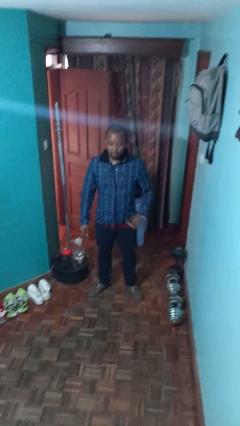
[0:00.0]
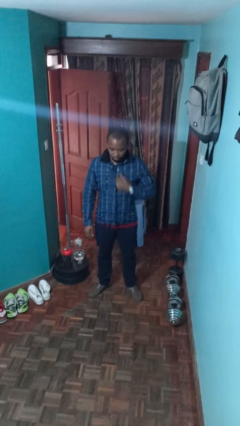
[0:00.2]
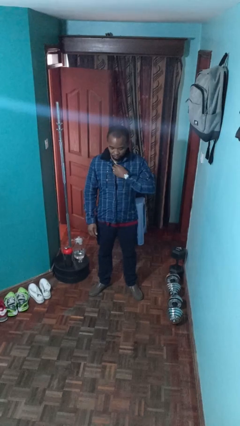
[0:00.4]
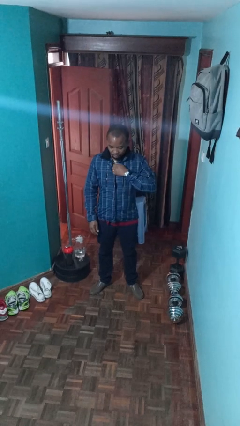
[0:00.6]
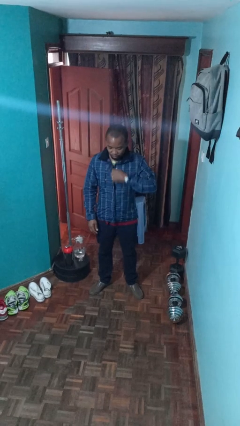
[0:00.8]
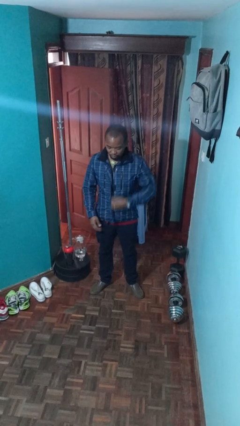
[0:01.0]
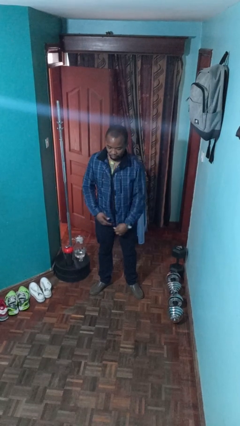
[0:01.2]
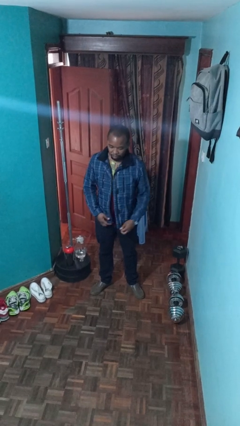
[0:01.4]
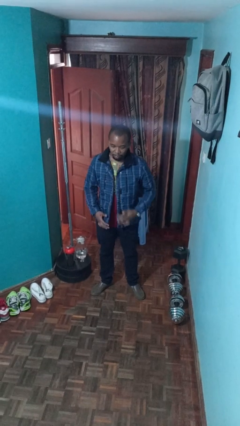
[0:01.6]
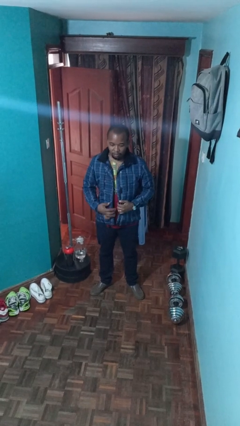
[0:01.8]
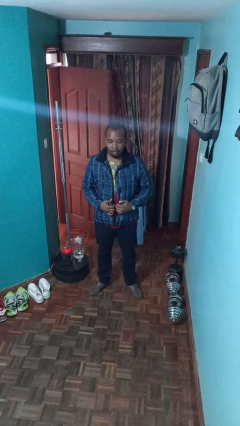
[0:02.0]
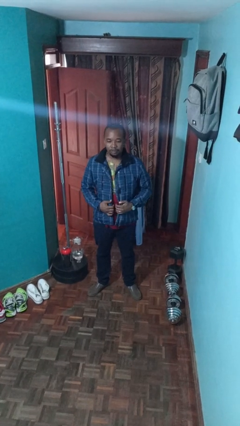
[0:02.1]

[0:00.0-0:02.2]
person unzips jacket

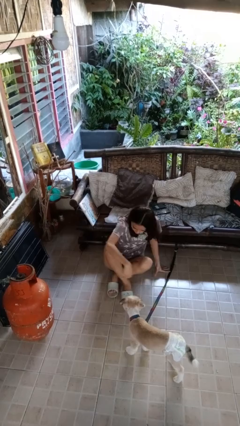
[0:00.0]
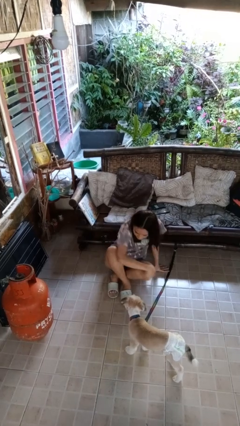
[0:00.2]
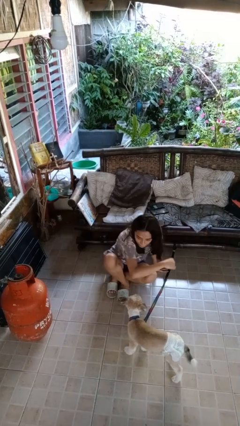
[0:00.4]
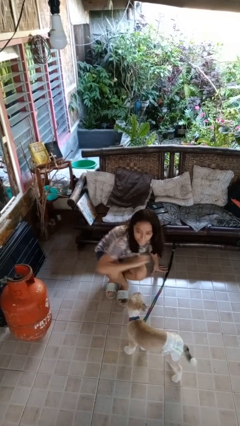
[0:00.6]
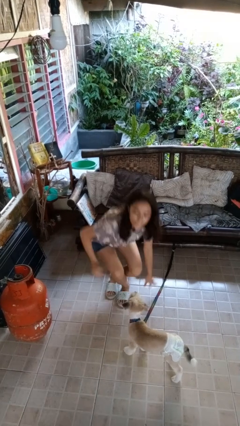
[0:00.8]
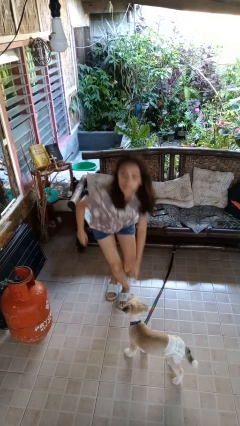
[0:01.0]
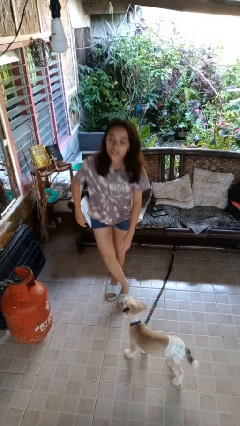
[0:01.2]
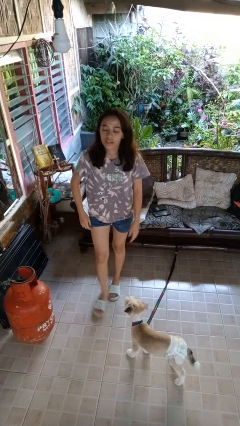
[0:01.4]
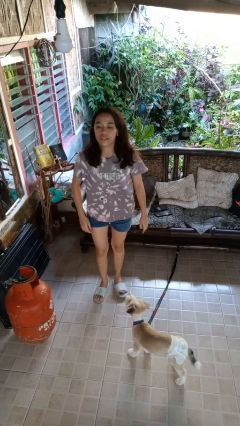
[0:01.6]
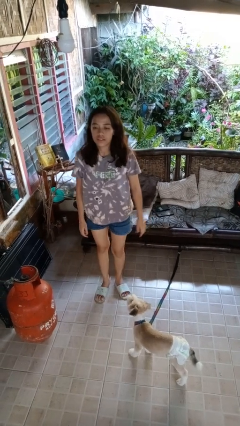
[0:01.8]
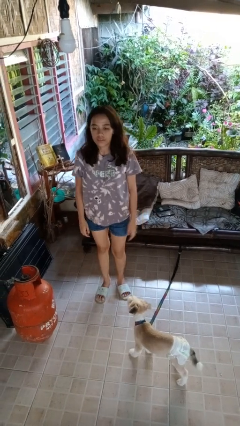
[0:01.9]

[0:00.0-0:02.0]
person stands up from floor

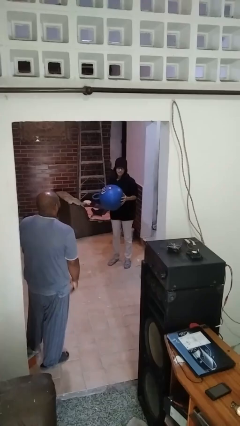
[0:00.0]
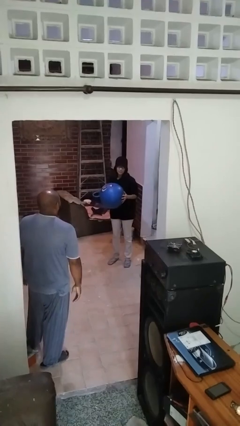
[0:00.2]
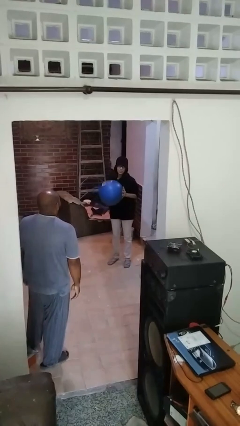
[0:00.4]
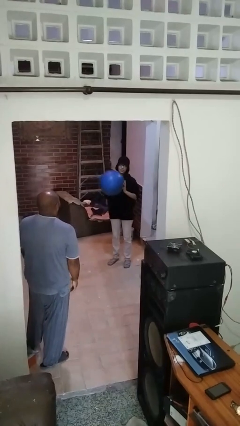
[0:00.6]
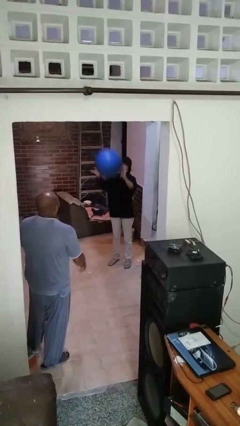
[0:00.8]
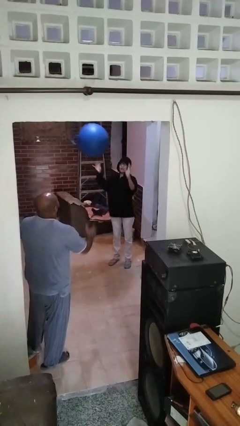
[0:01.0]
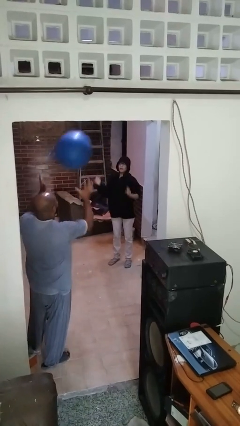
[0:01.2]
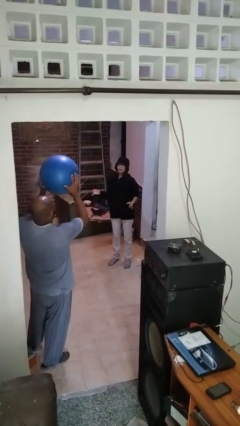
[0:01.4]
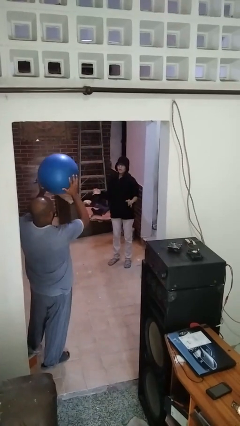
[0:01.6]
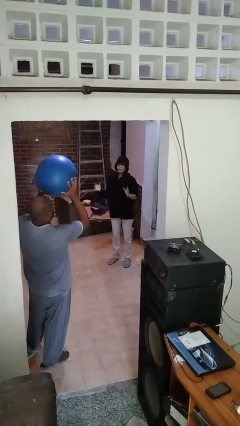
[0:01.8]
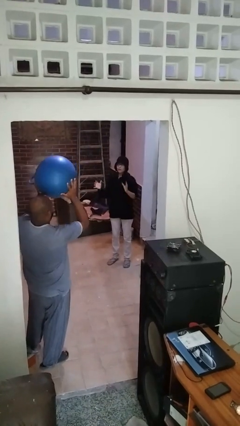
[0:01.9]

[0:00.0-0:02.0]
person throws object to person

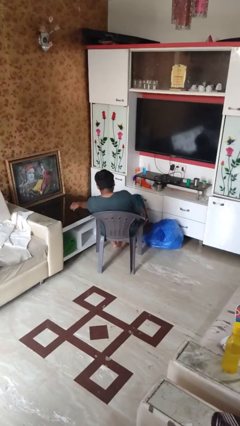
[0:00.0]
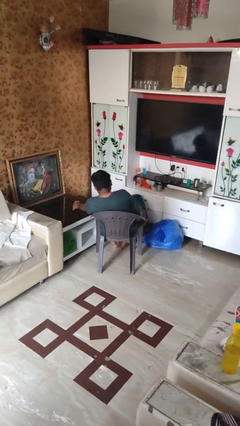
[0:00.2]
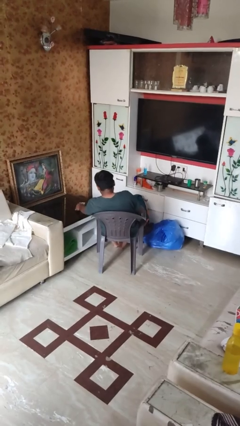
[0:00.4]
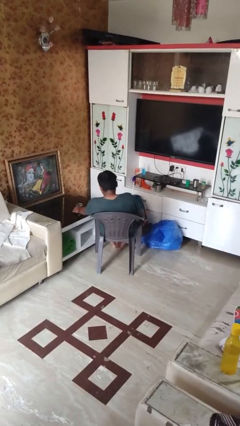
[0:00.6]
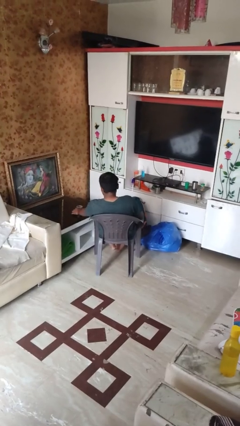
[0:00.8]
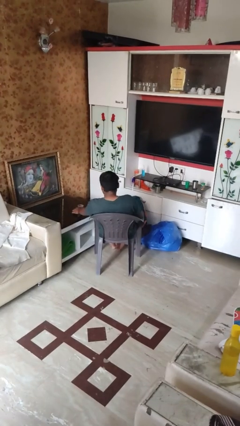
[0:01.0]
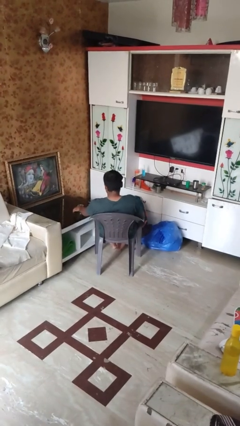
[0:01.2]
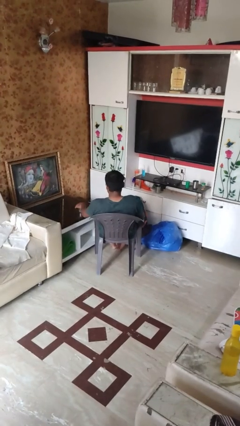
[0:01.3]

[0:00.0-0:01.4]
person sets upright glass

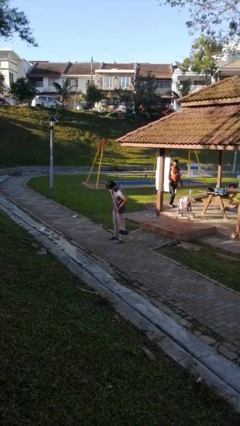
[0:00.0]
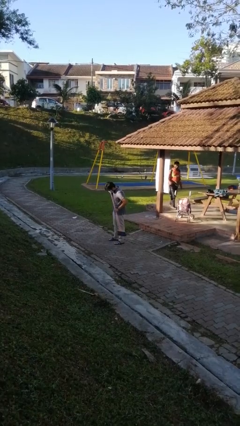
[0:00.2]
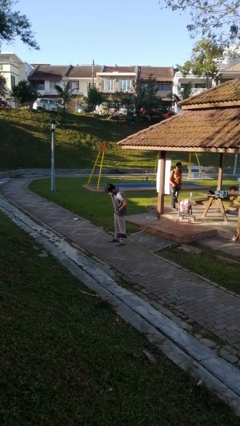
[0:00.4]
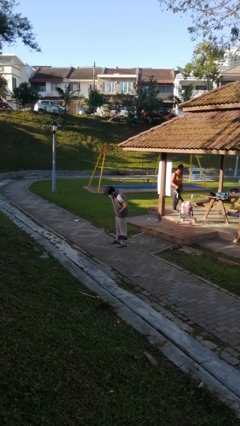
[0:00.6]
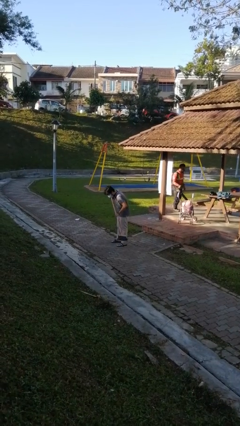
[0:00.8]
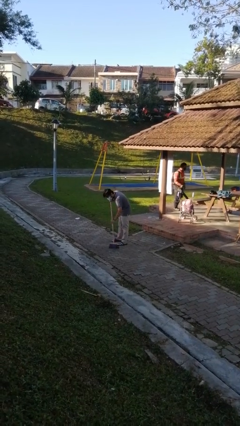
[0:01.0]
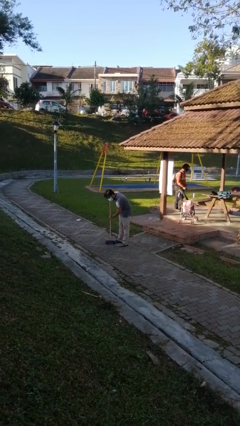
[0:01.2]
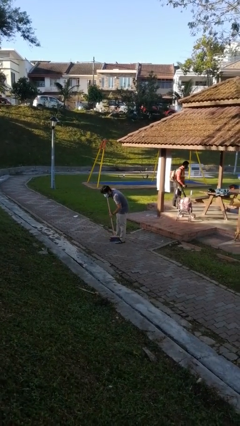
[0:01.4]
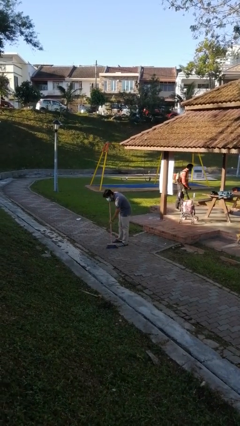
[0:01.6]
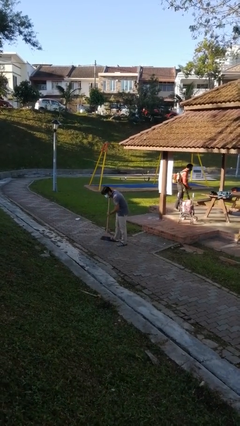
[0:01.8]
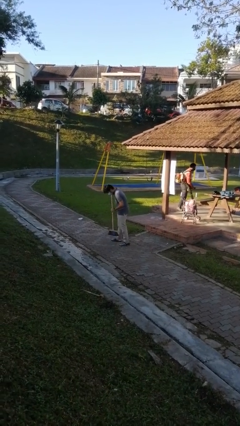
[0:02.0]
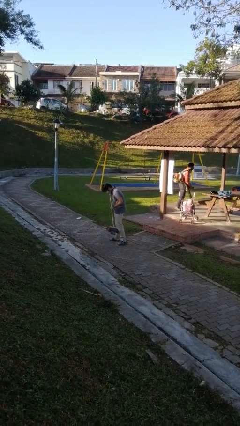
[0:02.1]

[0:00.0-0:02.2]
person sweeps floor

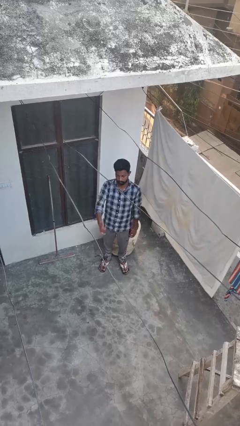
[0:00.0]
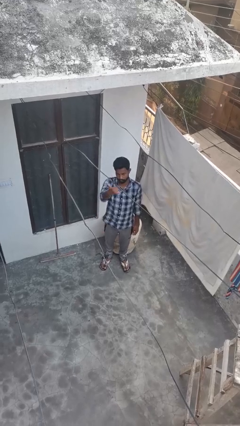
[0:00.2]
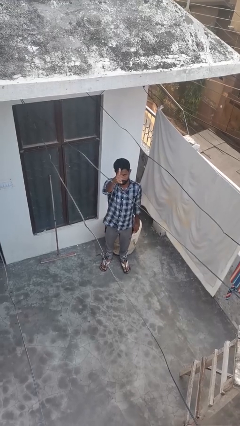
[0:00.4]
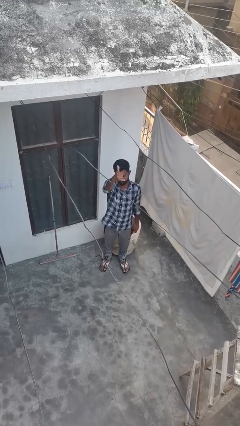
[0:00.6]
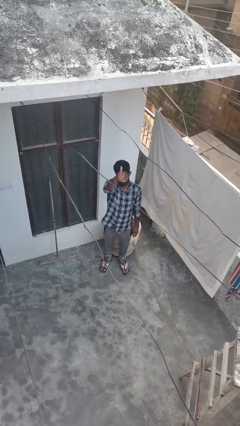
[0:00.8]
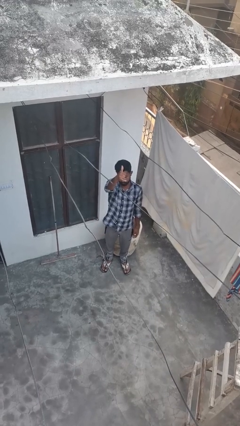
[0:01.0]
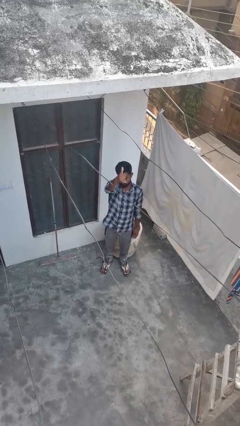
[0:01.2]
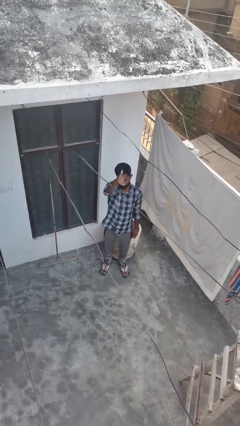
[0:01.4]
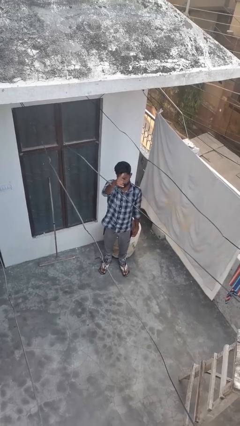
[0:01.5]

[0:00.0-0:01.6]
person gestures hang loose

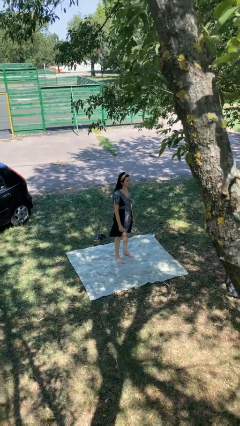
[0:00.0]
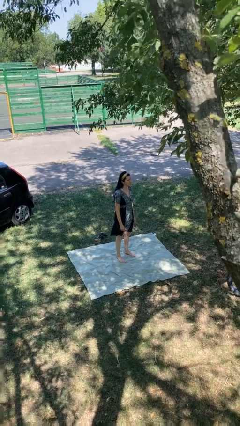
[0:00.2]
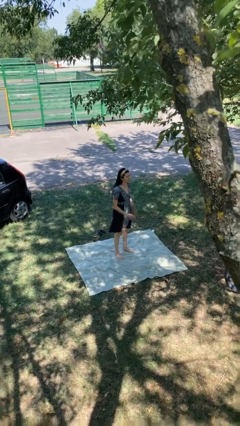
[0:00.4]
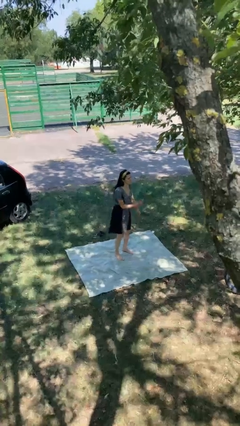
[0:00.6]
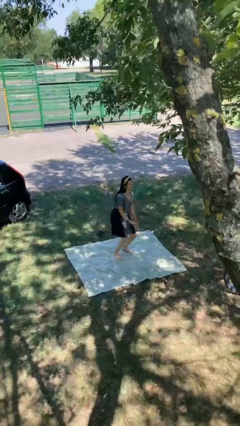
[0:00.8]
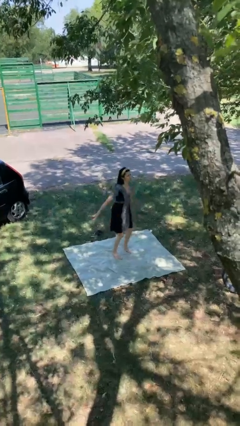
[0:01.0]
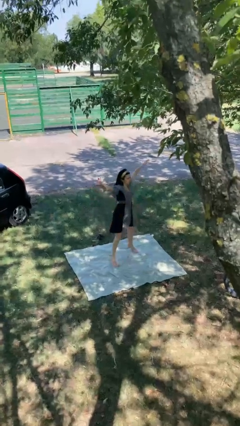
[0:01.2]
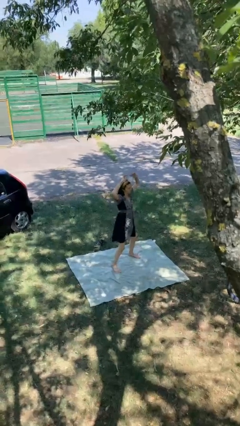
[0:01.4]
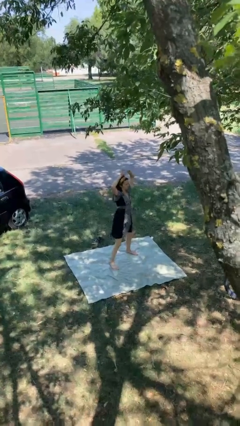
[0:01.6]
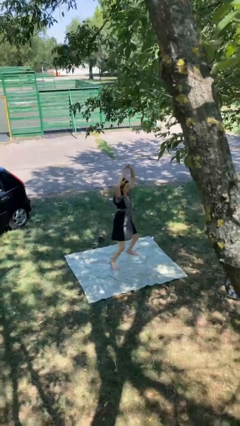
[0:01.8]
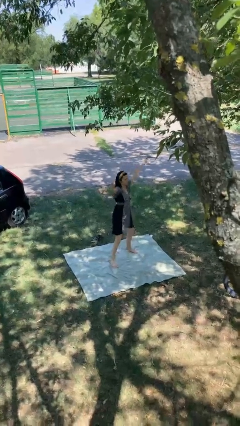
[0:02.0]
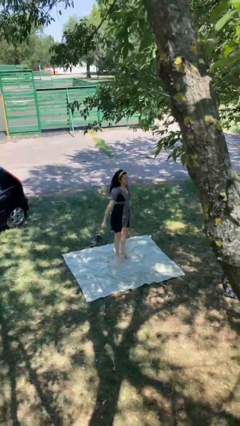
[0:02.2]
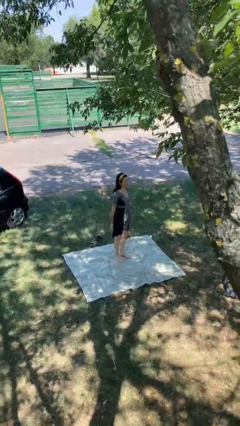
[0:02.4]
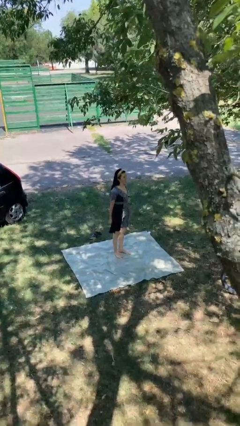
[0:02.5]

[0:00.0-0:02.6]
person exercises with jumping jacks

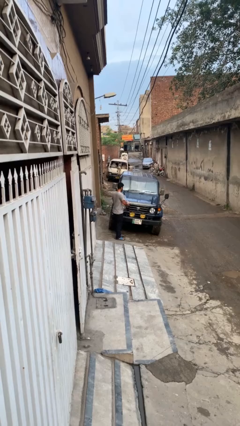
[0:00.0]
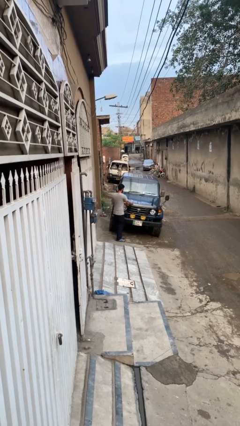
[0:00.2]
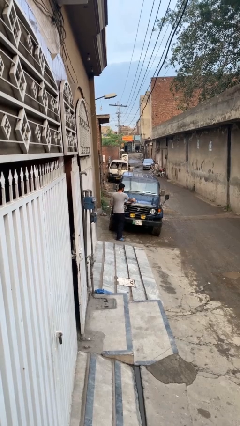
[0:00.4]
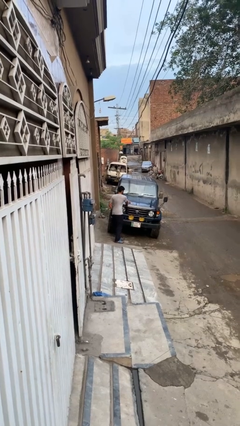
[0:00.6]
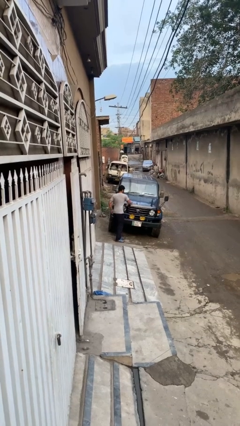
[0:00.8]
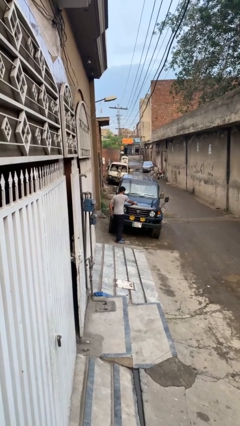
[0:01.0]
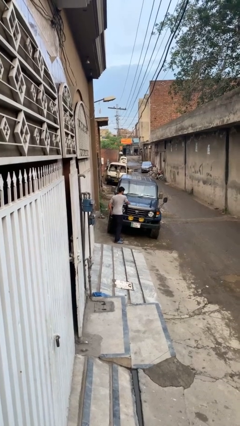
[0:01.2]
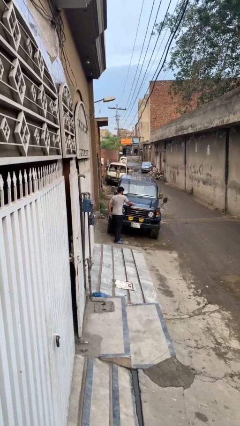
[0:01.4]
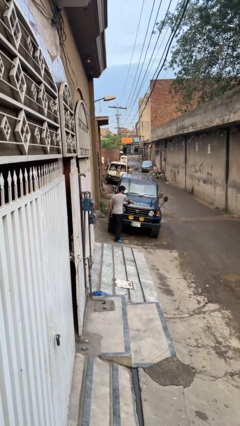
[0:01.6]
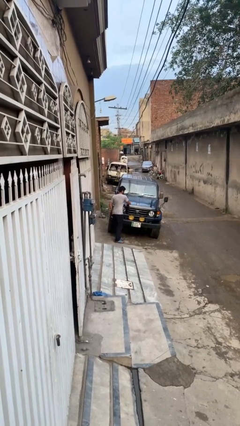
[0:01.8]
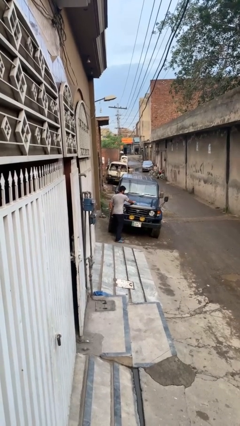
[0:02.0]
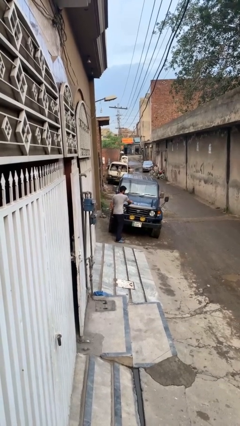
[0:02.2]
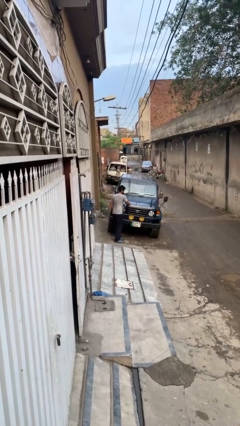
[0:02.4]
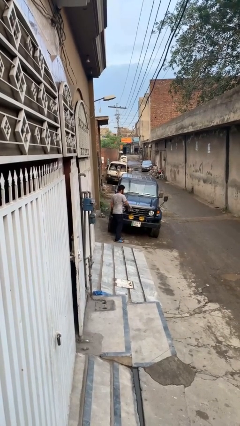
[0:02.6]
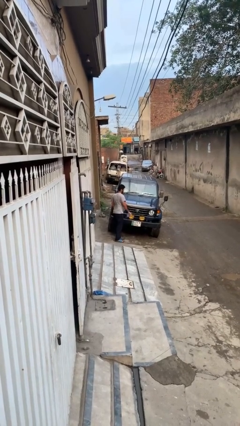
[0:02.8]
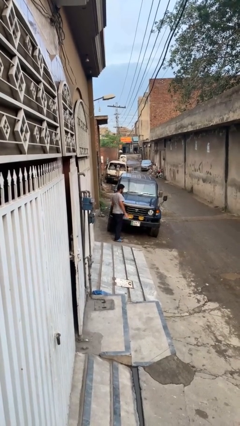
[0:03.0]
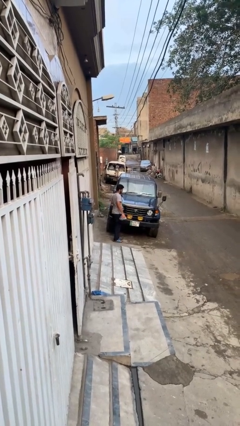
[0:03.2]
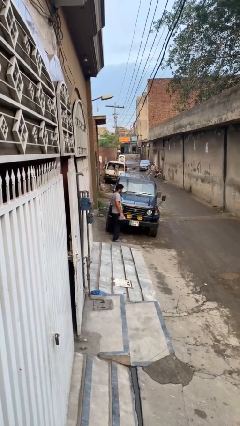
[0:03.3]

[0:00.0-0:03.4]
person polishes car with rag
